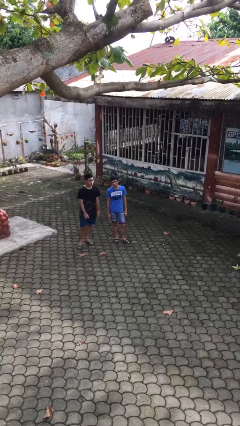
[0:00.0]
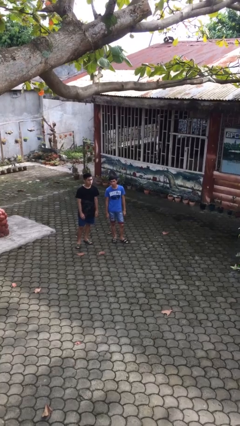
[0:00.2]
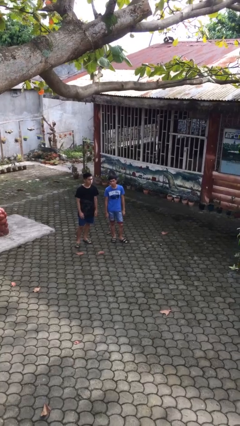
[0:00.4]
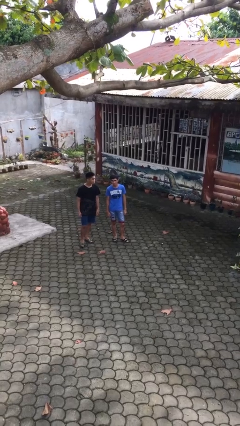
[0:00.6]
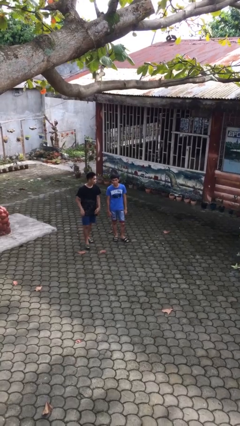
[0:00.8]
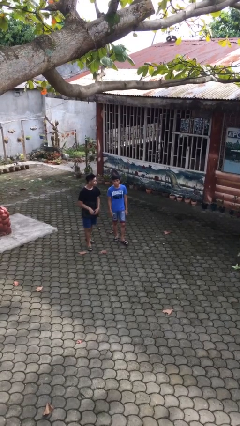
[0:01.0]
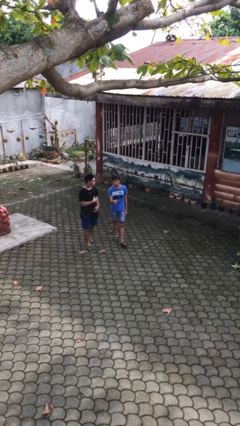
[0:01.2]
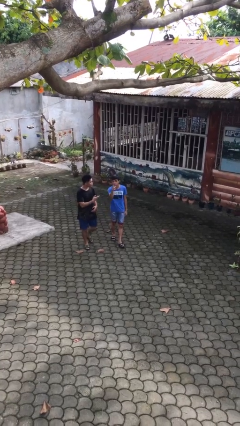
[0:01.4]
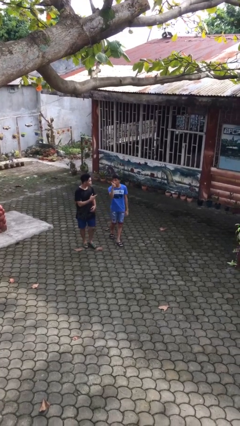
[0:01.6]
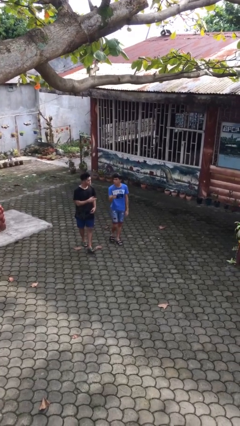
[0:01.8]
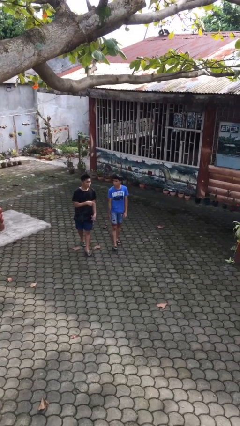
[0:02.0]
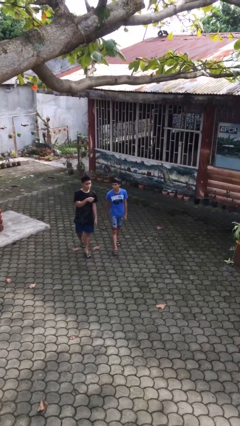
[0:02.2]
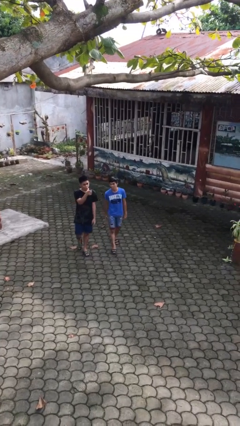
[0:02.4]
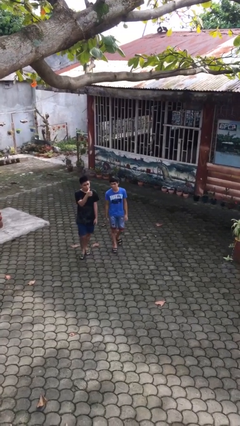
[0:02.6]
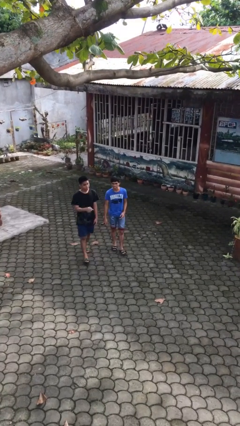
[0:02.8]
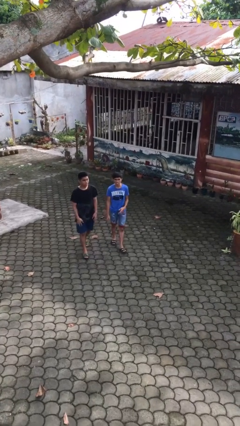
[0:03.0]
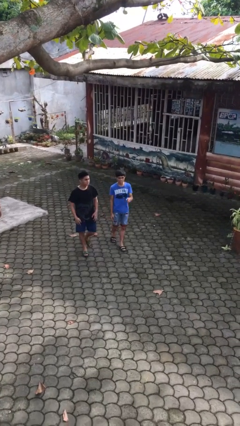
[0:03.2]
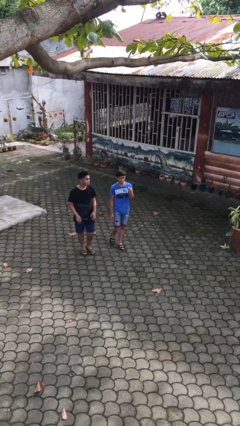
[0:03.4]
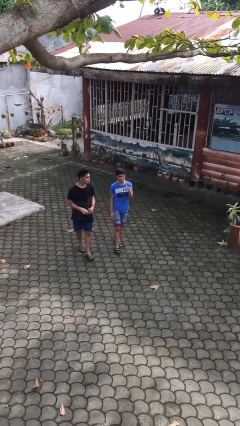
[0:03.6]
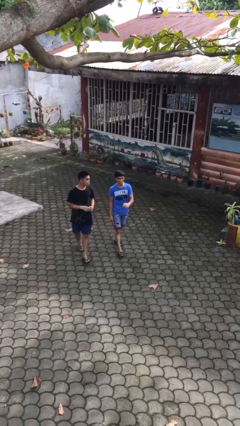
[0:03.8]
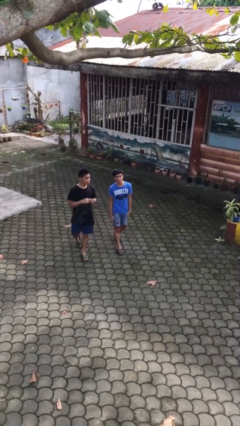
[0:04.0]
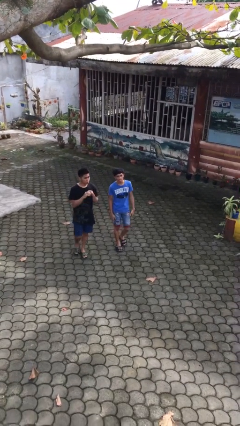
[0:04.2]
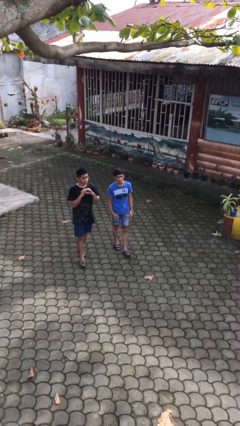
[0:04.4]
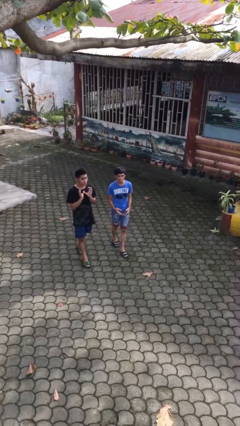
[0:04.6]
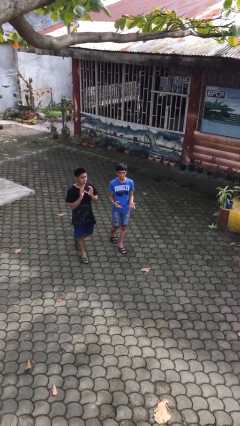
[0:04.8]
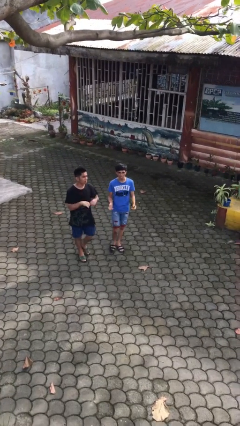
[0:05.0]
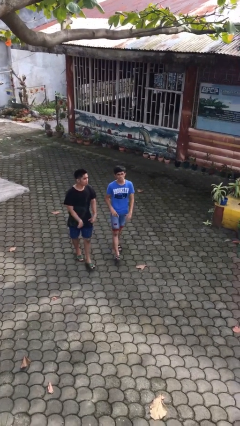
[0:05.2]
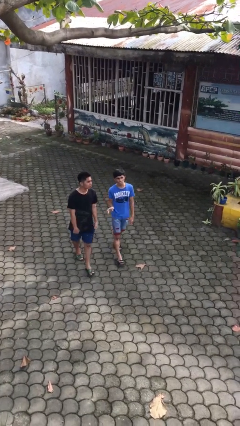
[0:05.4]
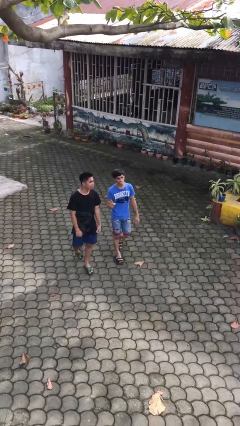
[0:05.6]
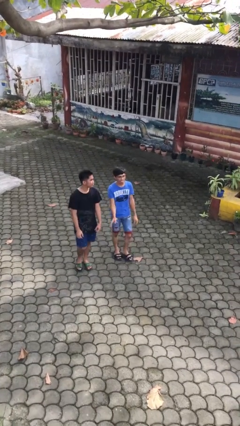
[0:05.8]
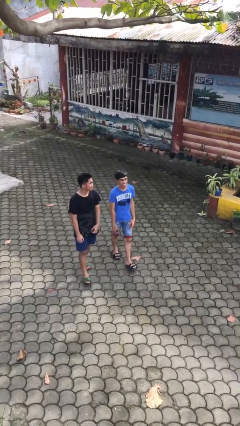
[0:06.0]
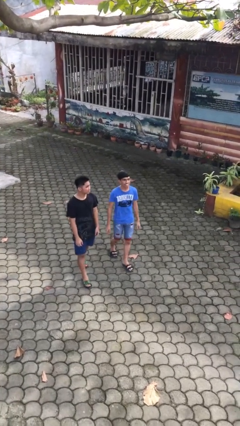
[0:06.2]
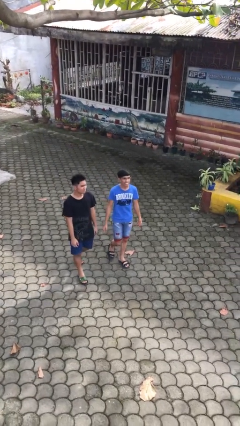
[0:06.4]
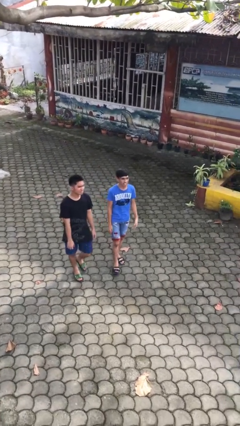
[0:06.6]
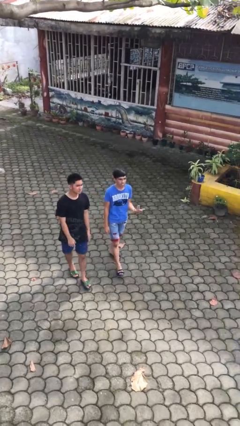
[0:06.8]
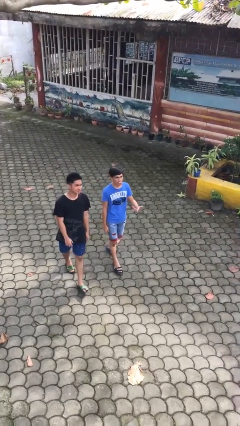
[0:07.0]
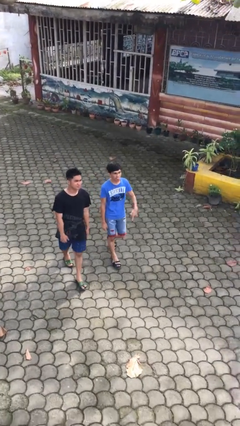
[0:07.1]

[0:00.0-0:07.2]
person talks to person

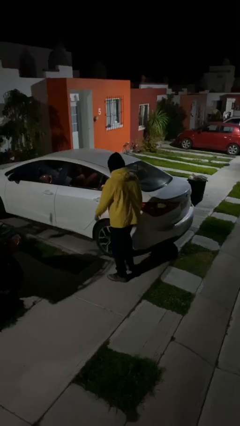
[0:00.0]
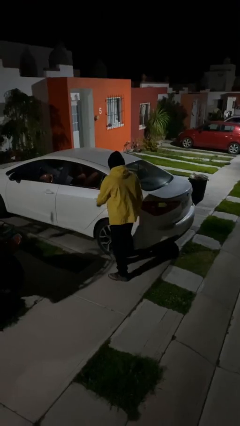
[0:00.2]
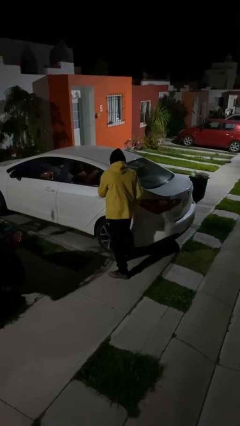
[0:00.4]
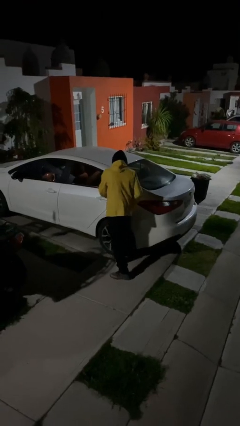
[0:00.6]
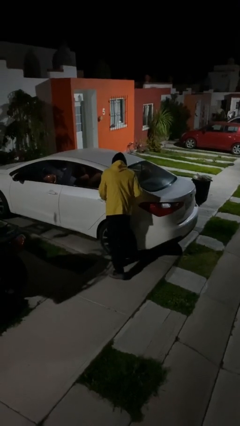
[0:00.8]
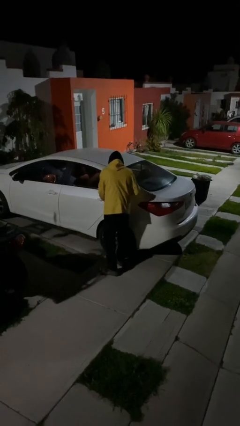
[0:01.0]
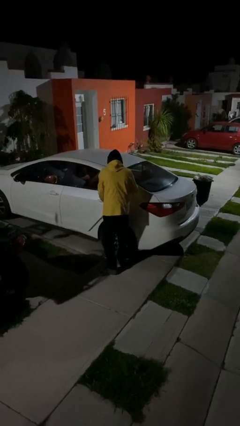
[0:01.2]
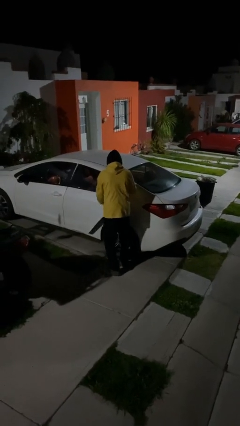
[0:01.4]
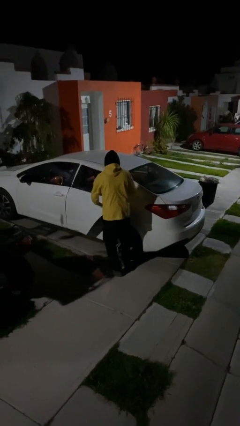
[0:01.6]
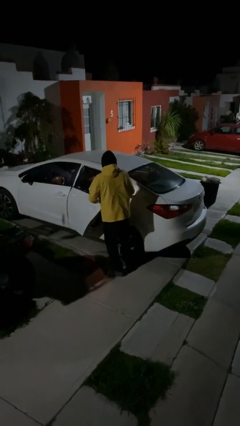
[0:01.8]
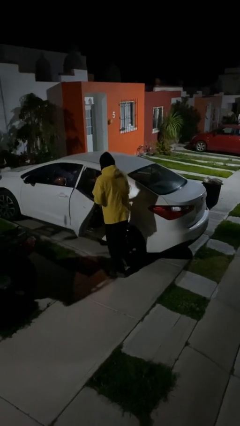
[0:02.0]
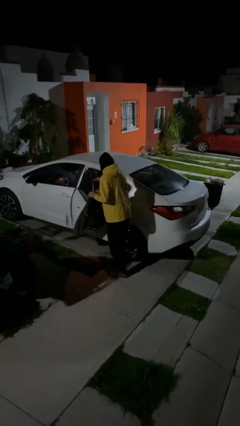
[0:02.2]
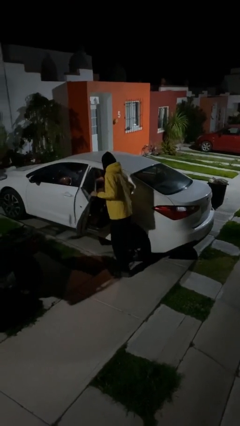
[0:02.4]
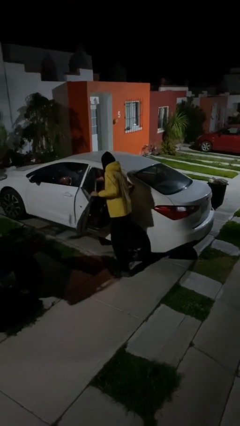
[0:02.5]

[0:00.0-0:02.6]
person opens car door

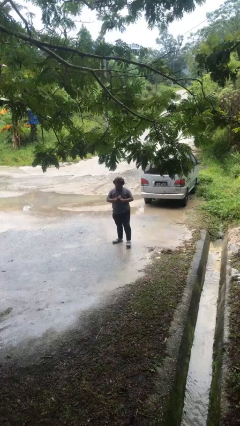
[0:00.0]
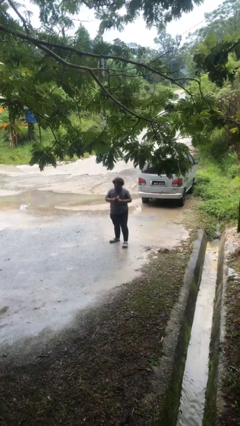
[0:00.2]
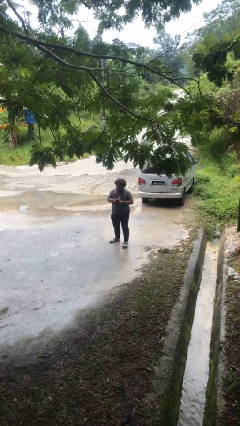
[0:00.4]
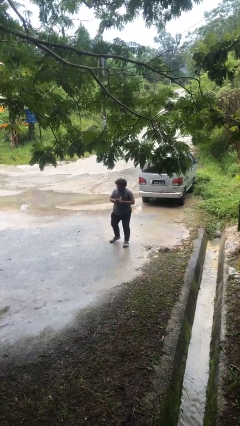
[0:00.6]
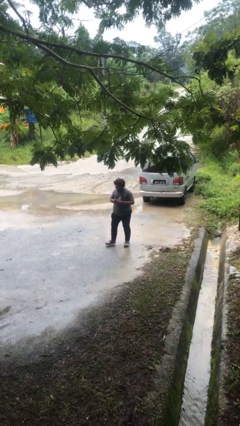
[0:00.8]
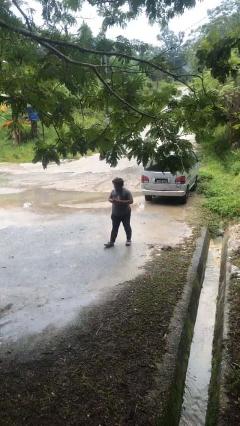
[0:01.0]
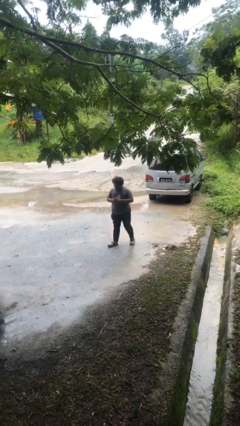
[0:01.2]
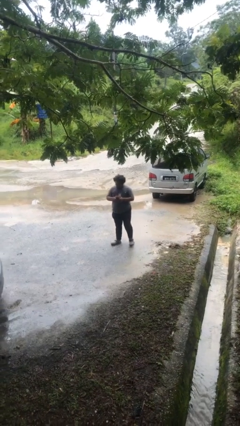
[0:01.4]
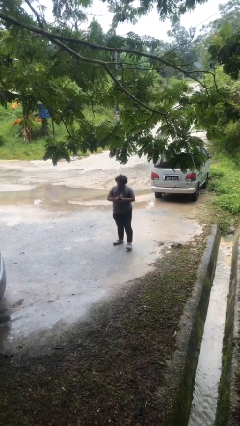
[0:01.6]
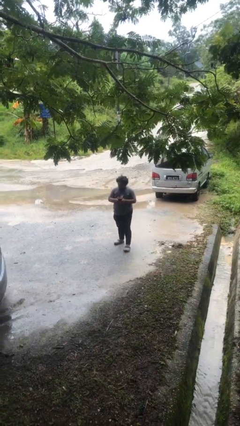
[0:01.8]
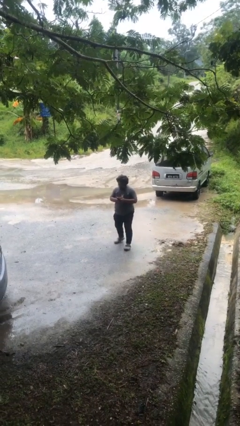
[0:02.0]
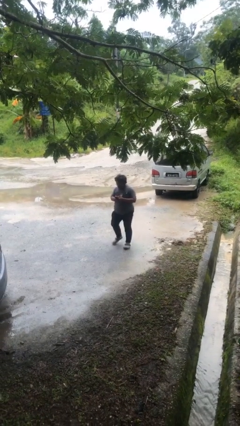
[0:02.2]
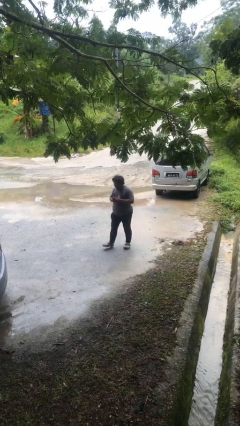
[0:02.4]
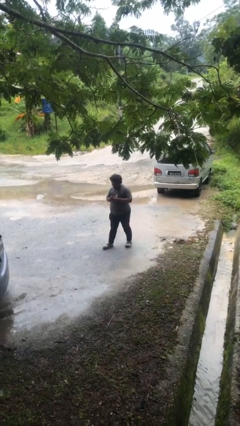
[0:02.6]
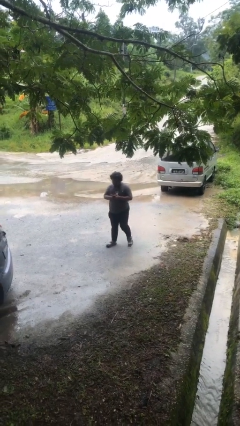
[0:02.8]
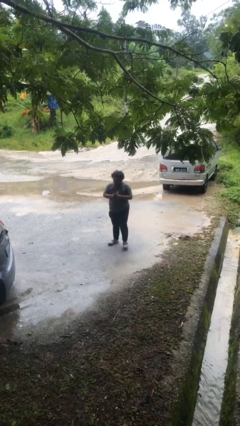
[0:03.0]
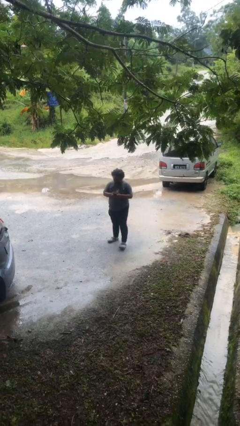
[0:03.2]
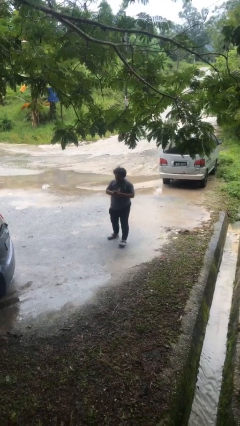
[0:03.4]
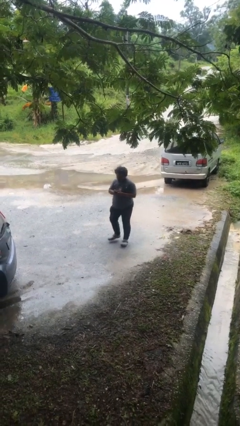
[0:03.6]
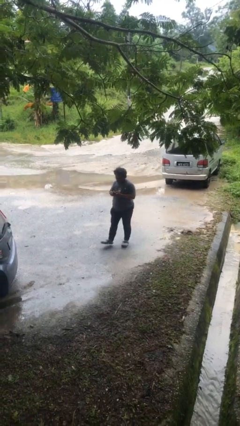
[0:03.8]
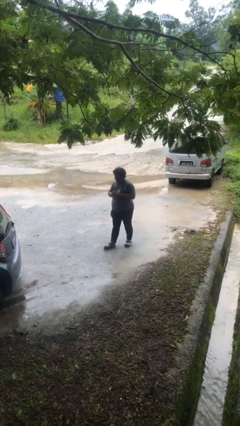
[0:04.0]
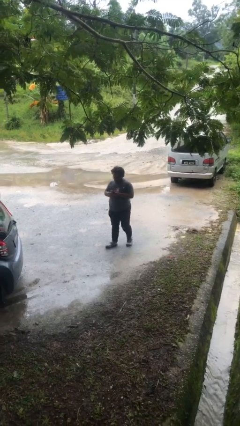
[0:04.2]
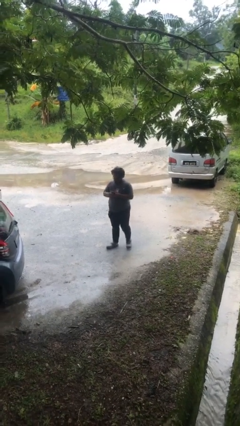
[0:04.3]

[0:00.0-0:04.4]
person texts on phone

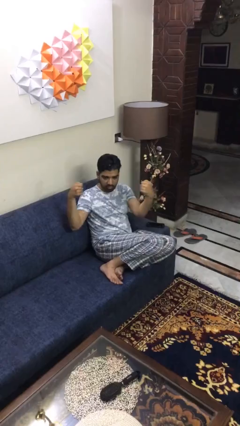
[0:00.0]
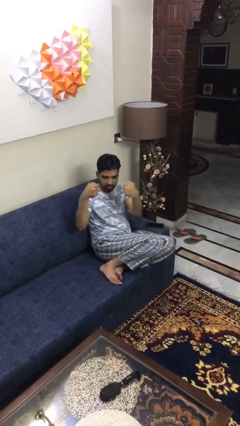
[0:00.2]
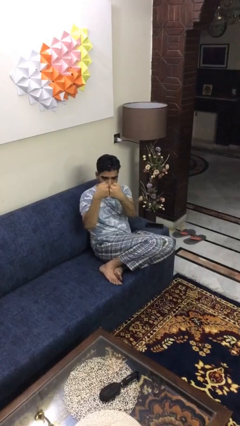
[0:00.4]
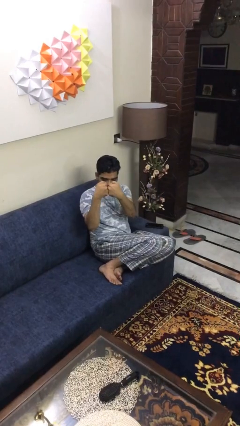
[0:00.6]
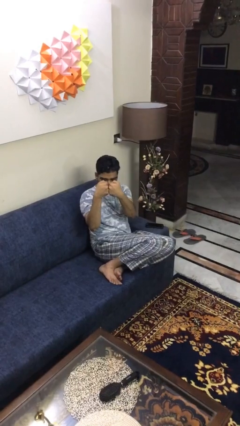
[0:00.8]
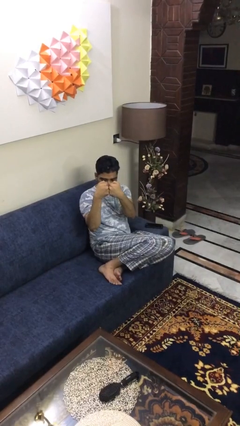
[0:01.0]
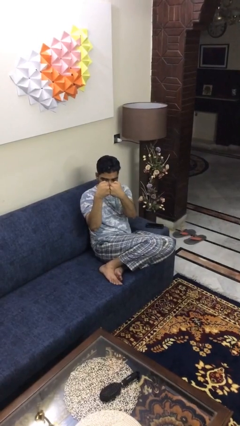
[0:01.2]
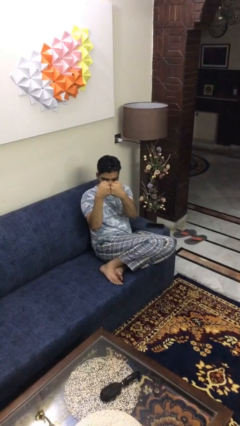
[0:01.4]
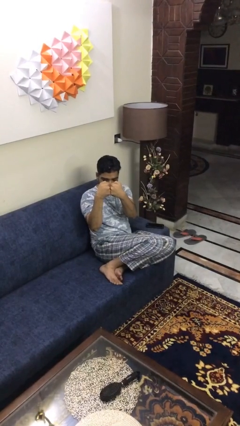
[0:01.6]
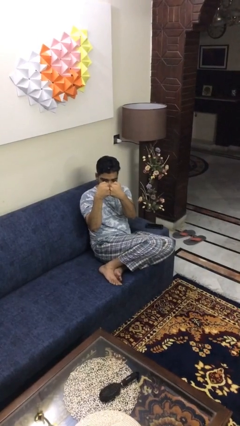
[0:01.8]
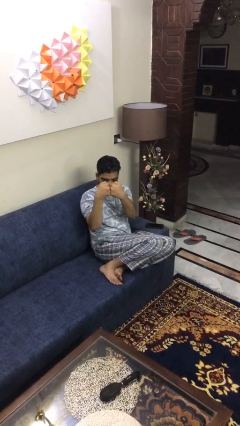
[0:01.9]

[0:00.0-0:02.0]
person gestures zoom out

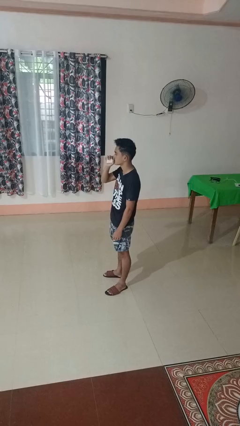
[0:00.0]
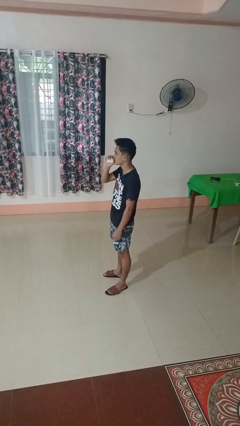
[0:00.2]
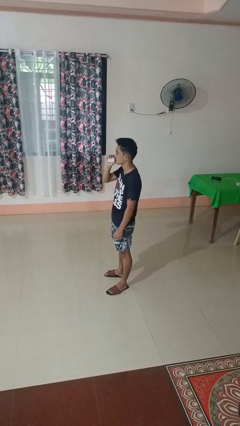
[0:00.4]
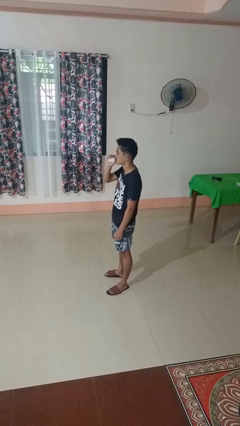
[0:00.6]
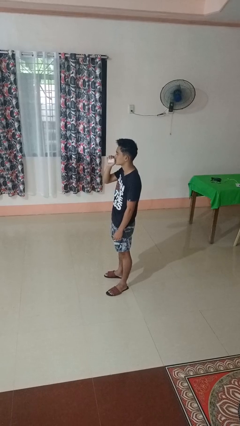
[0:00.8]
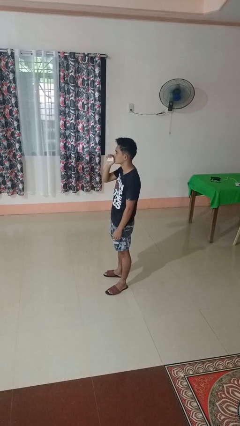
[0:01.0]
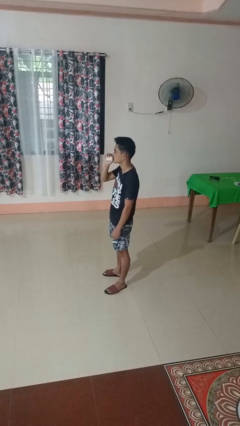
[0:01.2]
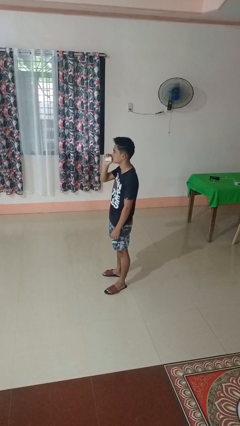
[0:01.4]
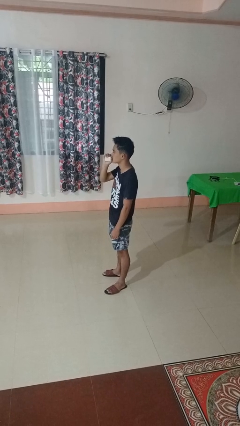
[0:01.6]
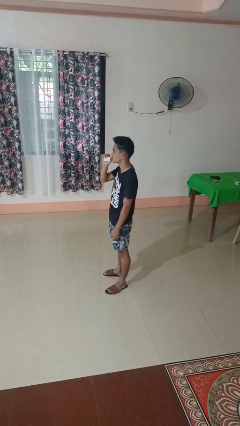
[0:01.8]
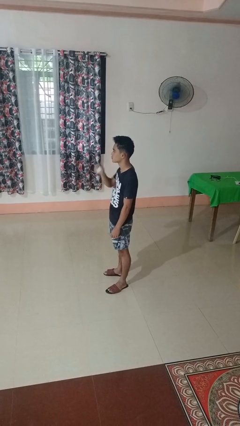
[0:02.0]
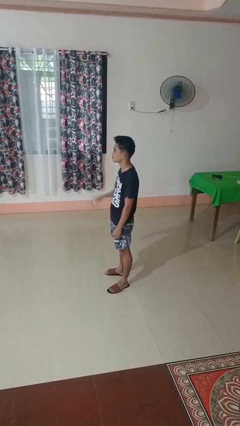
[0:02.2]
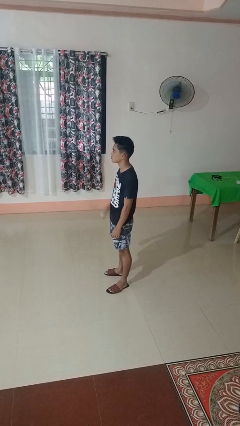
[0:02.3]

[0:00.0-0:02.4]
person vapes
